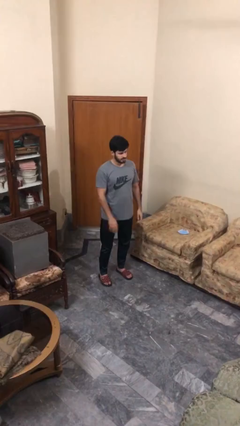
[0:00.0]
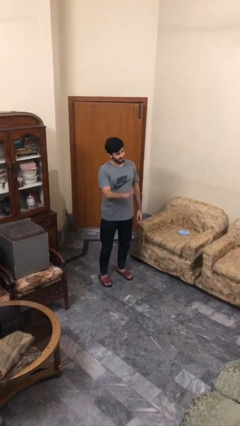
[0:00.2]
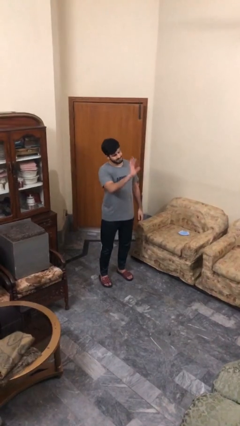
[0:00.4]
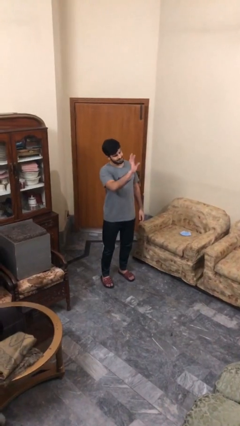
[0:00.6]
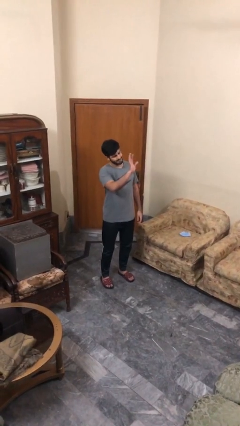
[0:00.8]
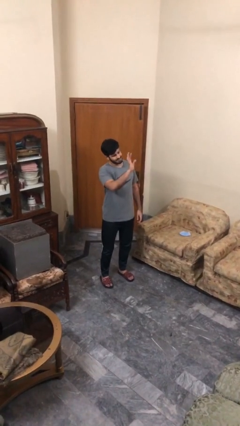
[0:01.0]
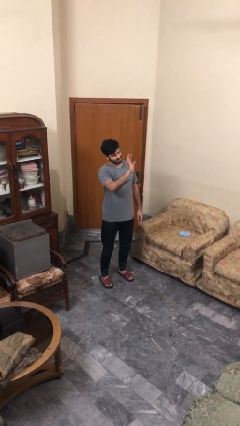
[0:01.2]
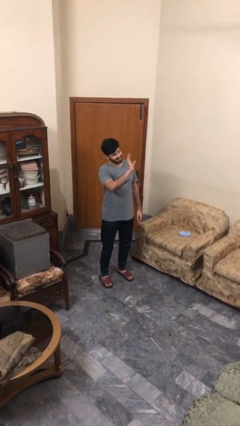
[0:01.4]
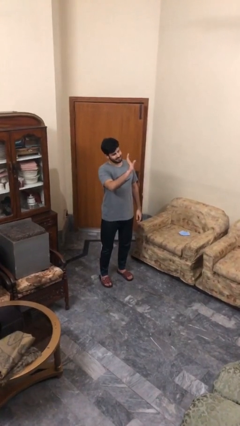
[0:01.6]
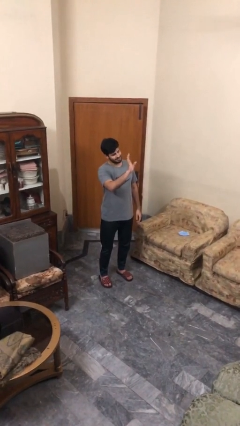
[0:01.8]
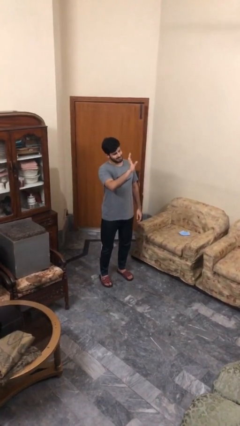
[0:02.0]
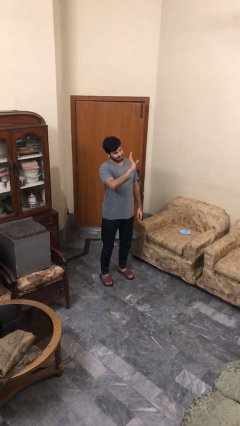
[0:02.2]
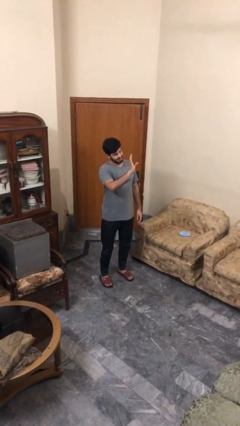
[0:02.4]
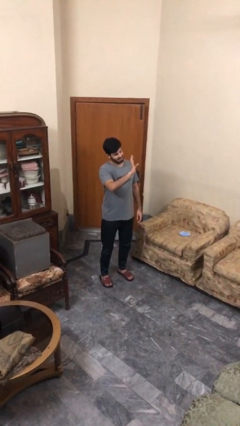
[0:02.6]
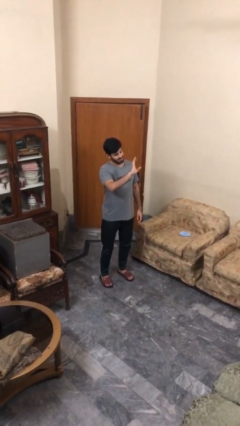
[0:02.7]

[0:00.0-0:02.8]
person waves at person

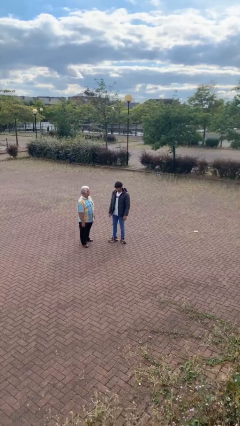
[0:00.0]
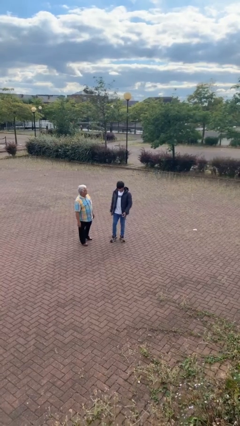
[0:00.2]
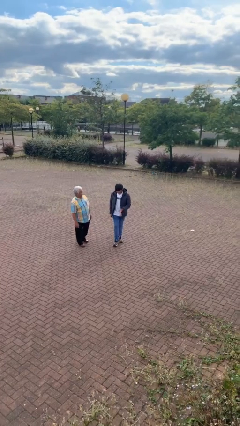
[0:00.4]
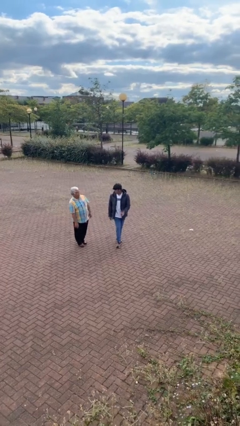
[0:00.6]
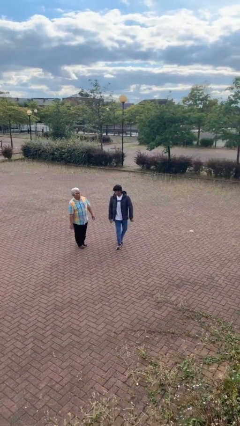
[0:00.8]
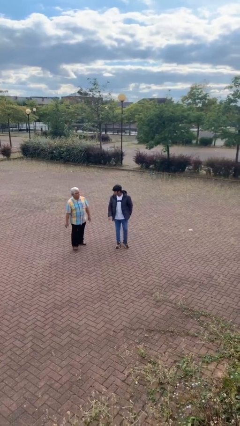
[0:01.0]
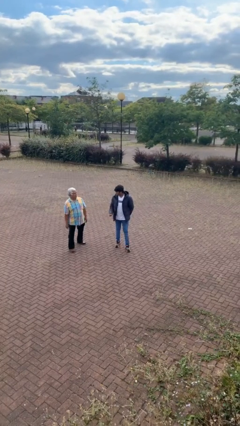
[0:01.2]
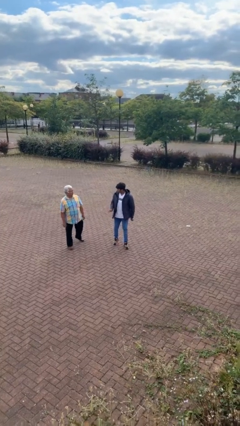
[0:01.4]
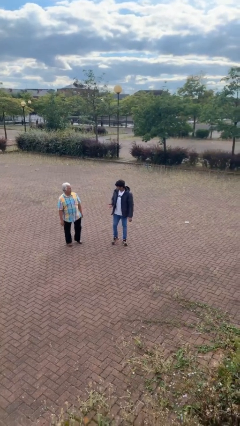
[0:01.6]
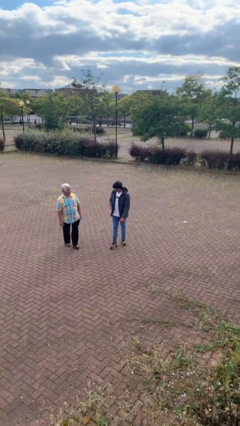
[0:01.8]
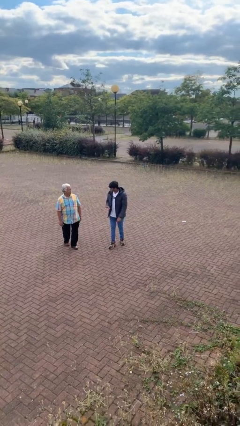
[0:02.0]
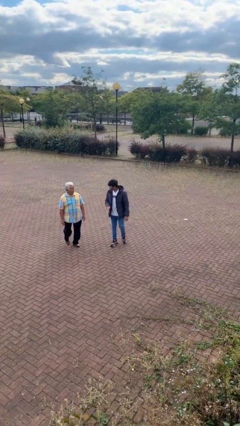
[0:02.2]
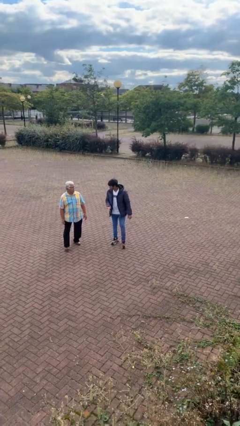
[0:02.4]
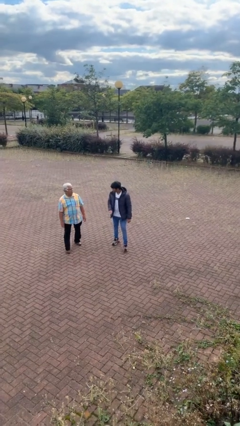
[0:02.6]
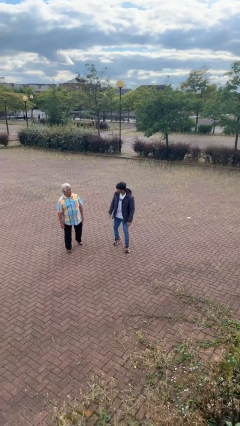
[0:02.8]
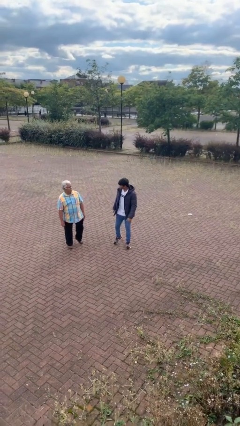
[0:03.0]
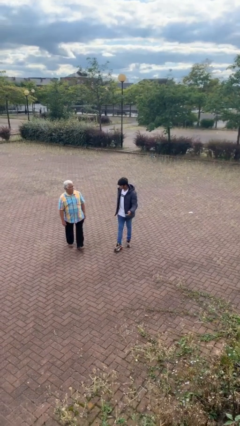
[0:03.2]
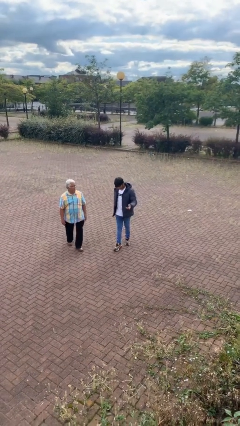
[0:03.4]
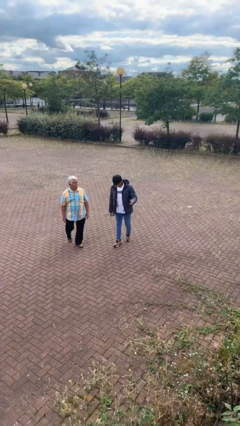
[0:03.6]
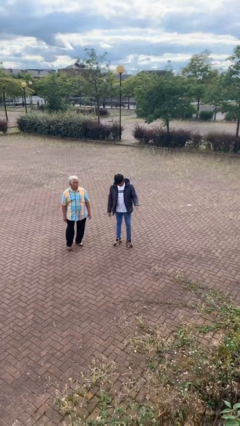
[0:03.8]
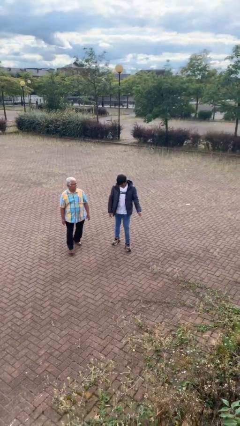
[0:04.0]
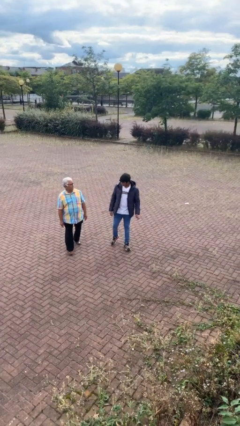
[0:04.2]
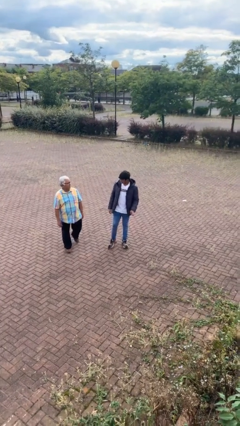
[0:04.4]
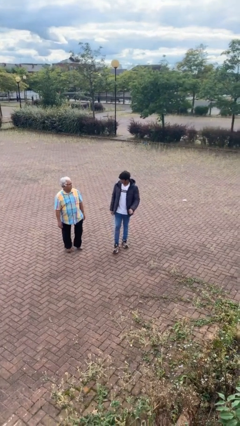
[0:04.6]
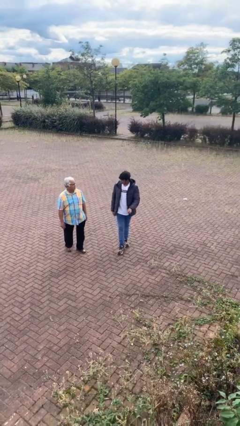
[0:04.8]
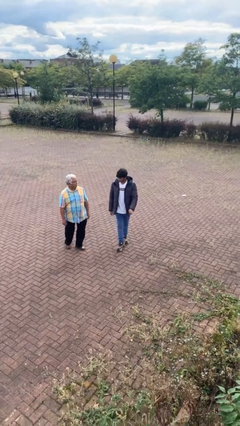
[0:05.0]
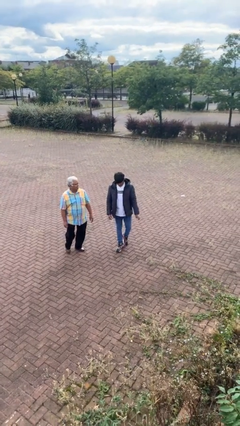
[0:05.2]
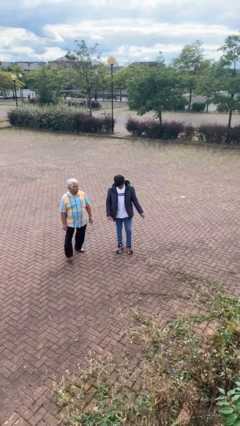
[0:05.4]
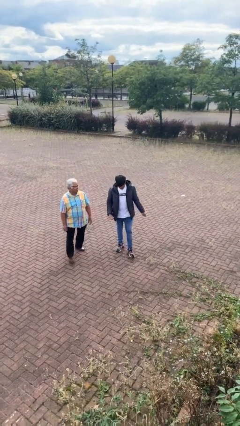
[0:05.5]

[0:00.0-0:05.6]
person talks to person

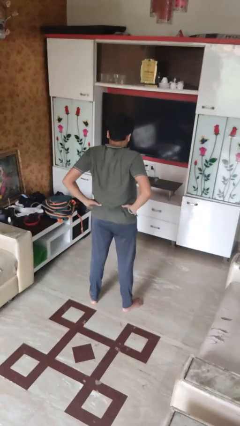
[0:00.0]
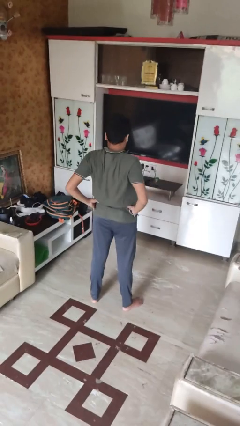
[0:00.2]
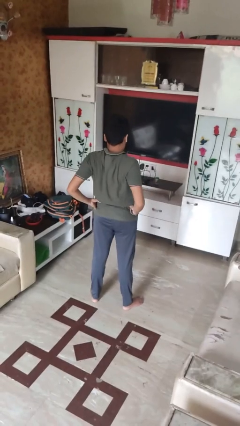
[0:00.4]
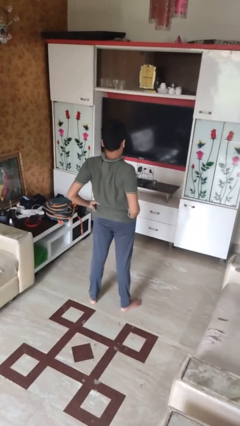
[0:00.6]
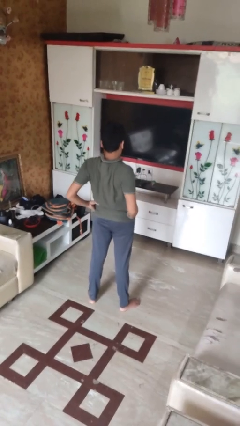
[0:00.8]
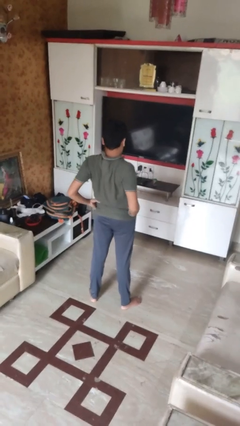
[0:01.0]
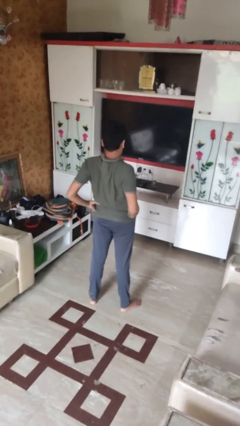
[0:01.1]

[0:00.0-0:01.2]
person stretches back

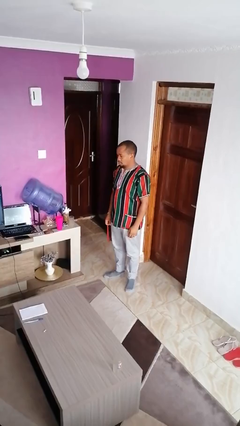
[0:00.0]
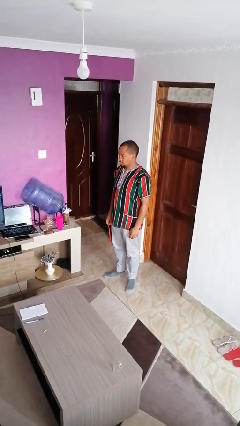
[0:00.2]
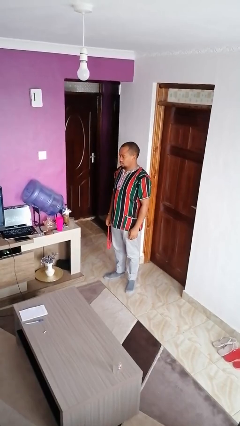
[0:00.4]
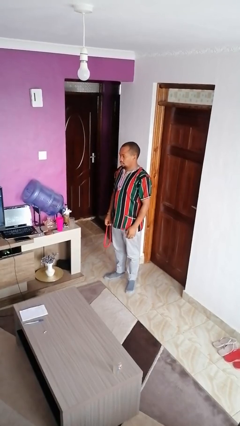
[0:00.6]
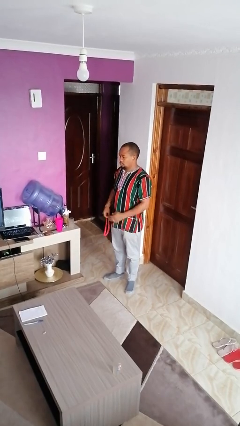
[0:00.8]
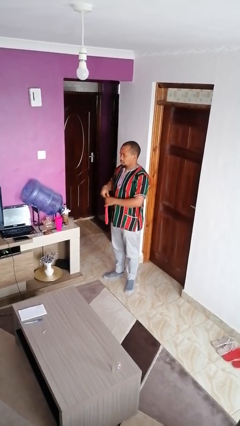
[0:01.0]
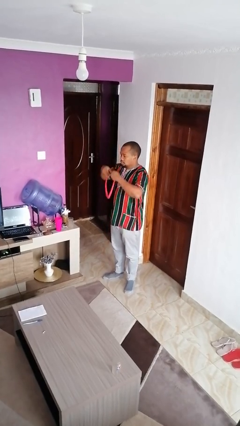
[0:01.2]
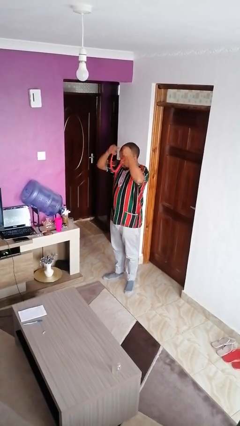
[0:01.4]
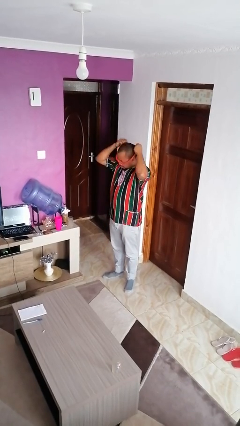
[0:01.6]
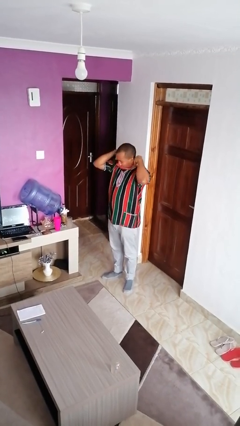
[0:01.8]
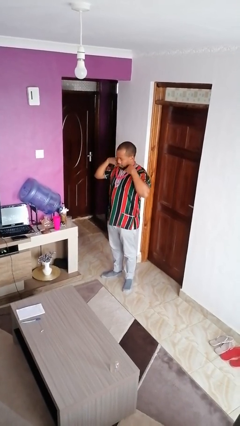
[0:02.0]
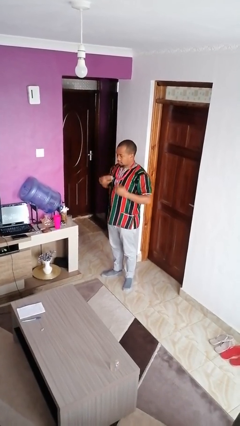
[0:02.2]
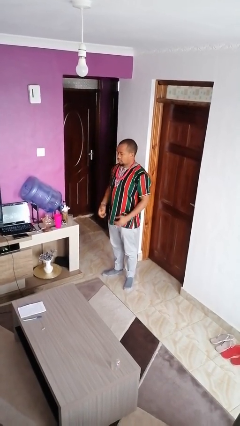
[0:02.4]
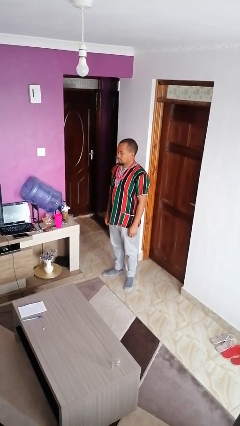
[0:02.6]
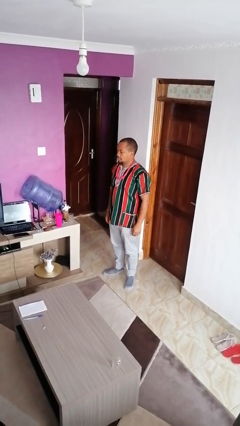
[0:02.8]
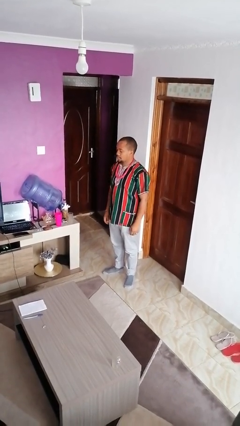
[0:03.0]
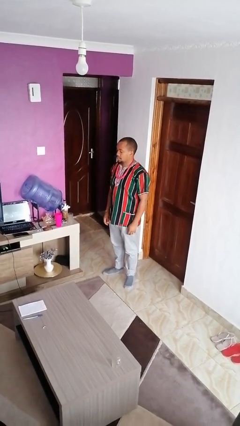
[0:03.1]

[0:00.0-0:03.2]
person puts on necklace

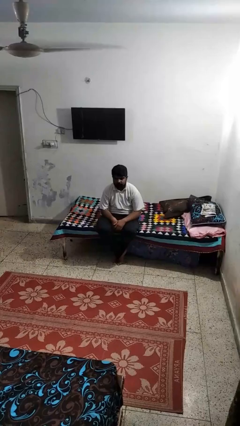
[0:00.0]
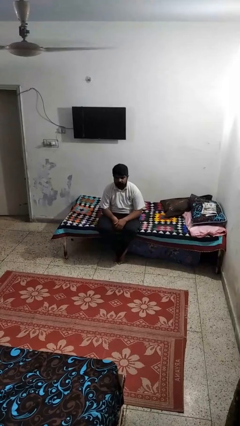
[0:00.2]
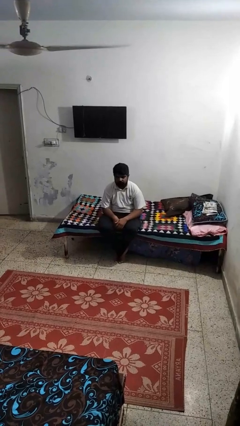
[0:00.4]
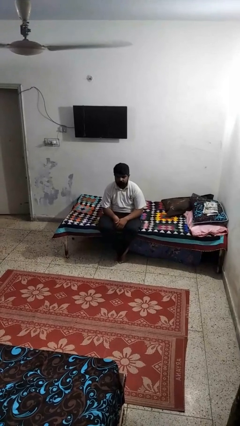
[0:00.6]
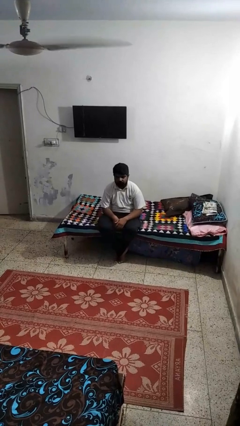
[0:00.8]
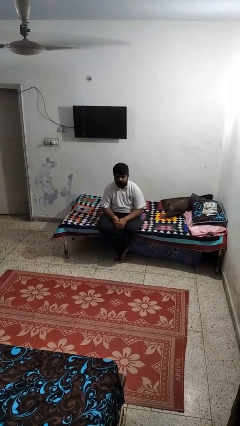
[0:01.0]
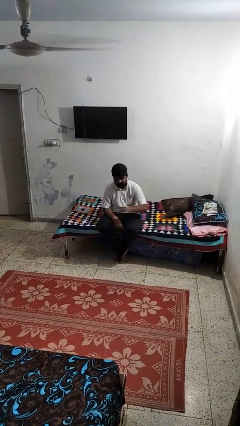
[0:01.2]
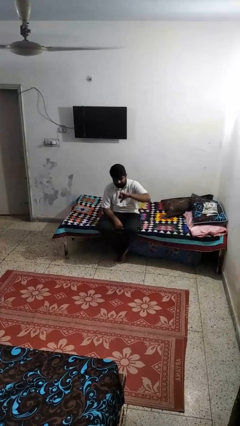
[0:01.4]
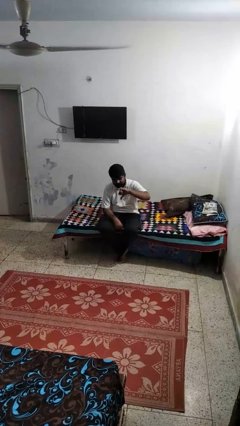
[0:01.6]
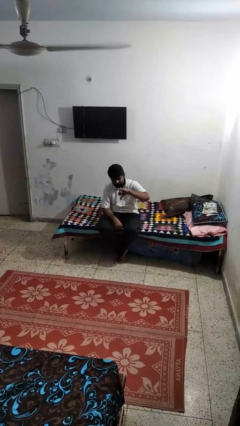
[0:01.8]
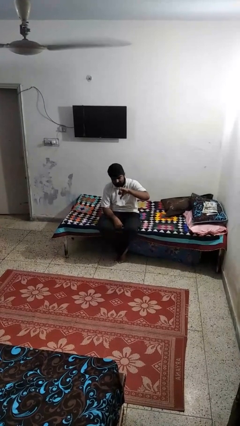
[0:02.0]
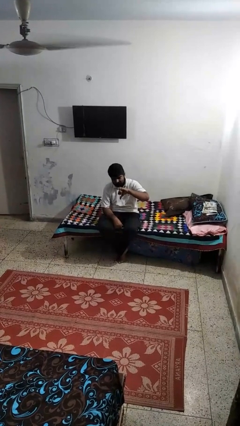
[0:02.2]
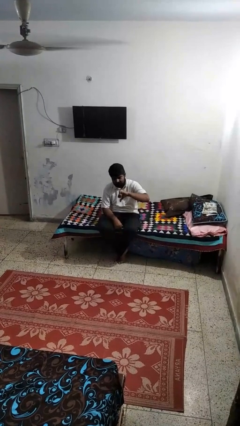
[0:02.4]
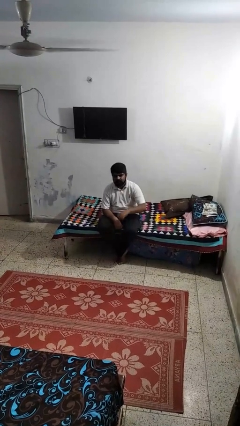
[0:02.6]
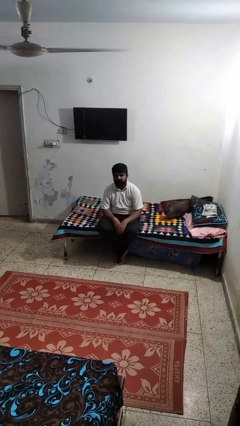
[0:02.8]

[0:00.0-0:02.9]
person gestures thumbs down

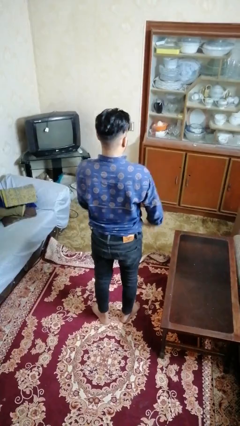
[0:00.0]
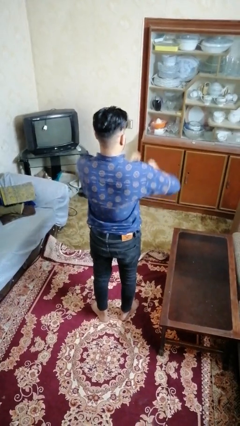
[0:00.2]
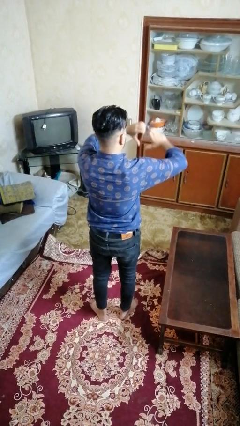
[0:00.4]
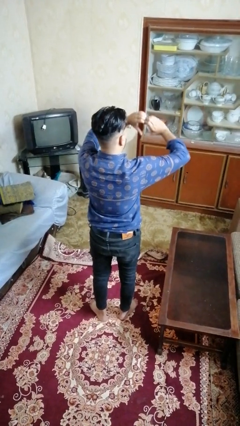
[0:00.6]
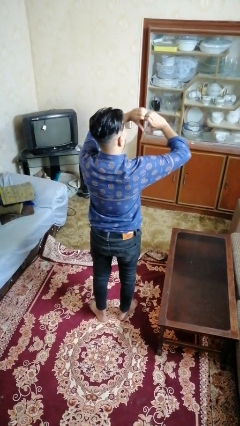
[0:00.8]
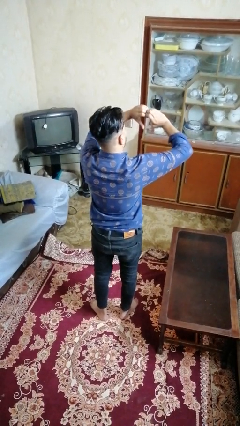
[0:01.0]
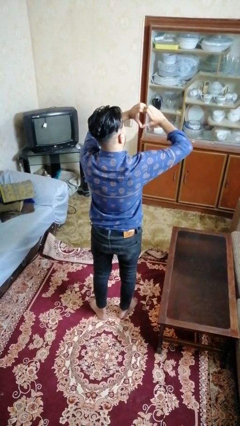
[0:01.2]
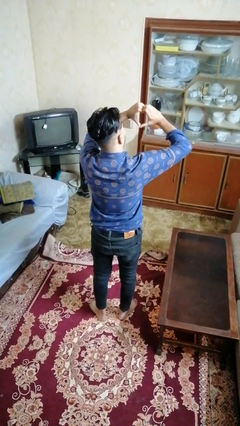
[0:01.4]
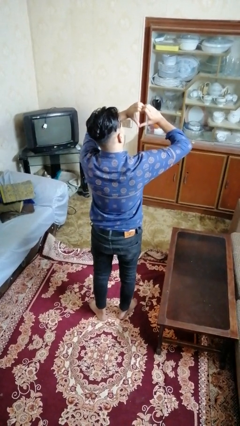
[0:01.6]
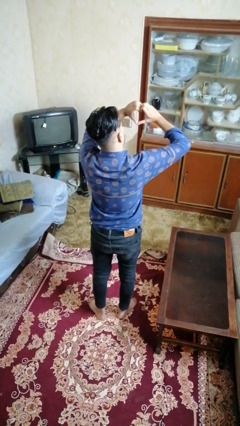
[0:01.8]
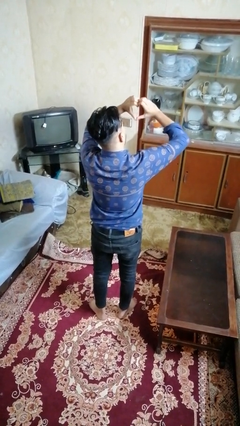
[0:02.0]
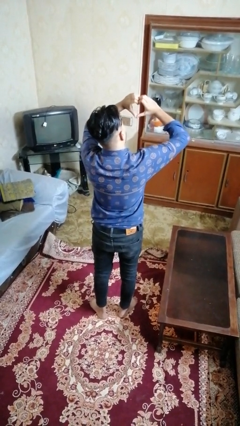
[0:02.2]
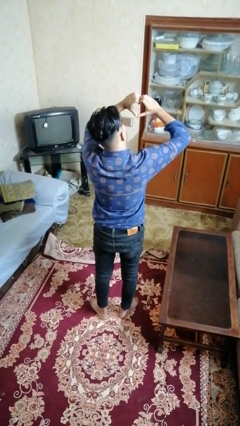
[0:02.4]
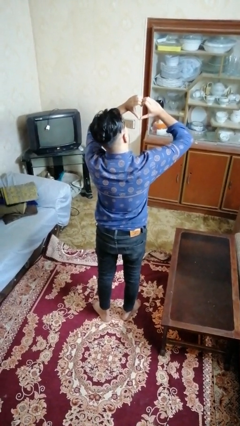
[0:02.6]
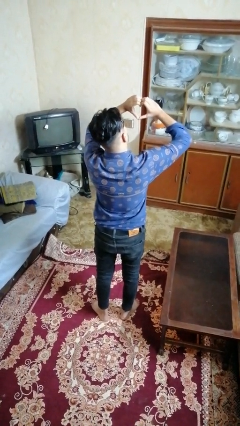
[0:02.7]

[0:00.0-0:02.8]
person gestures heart
